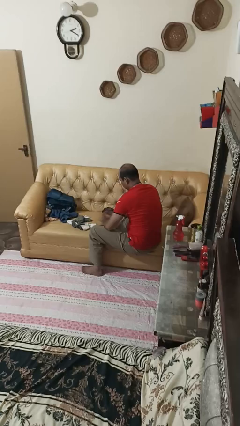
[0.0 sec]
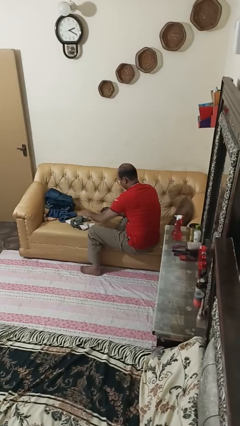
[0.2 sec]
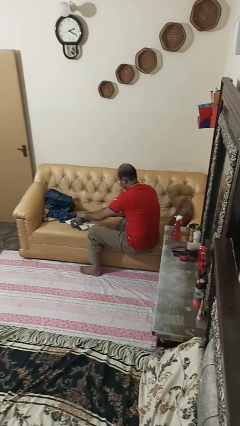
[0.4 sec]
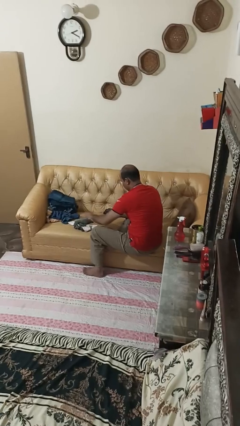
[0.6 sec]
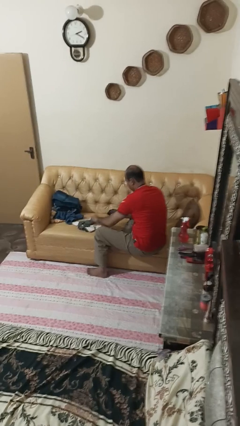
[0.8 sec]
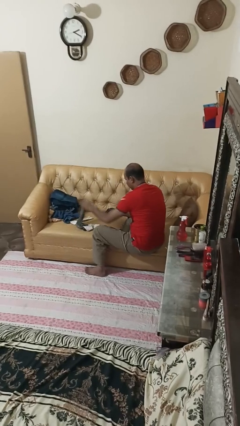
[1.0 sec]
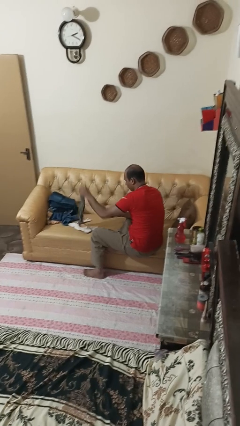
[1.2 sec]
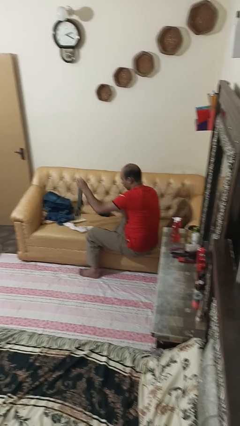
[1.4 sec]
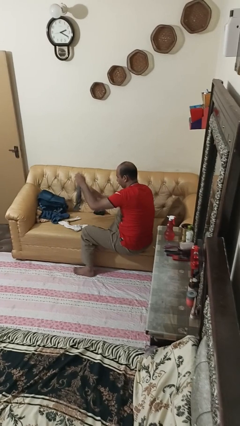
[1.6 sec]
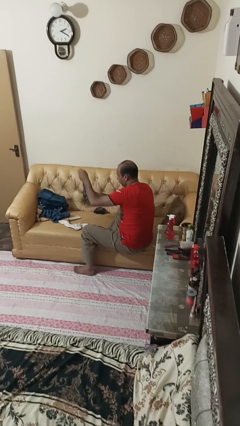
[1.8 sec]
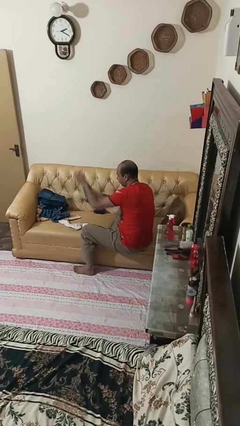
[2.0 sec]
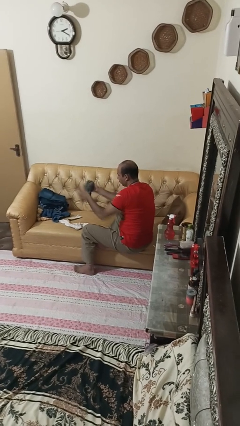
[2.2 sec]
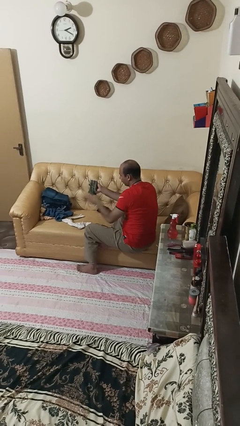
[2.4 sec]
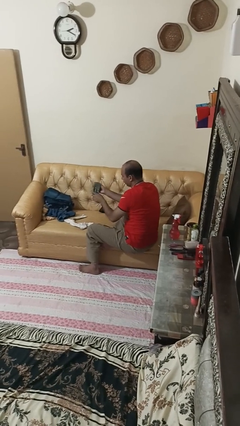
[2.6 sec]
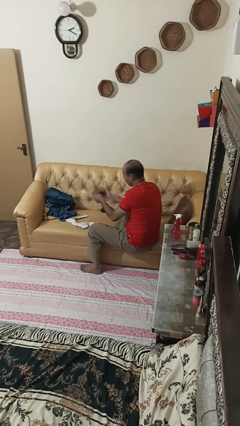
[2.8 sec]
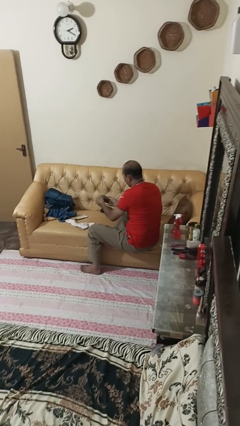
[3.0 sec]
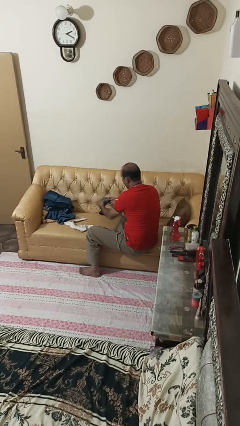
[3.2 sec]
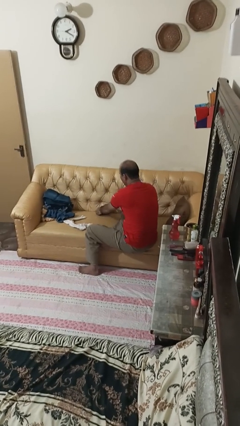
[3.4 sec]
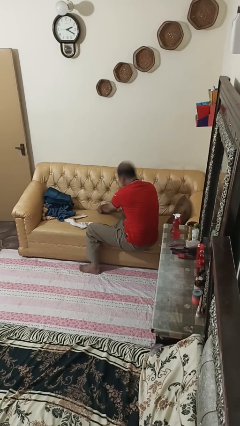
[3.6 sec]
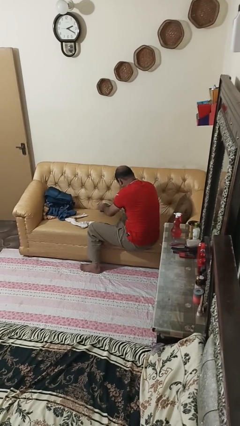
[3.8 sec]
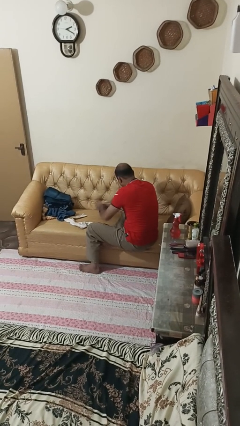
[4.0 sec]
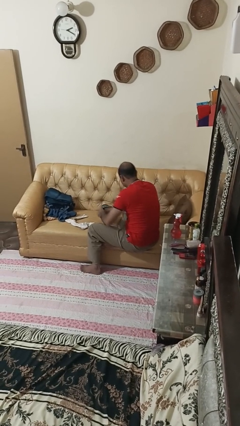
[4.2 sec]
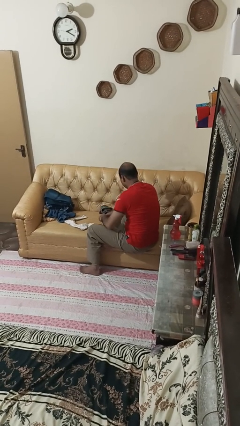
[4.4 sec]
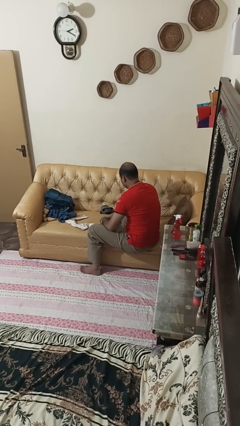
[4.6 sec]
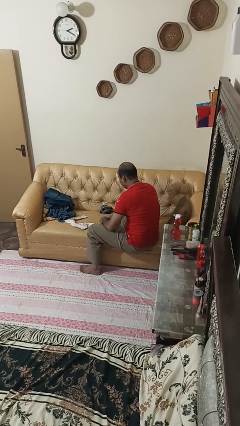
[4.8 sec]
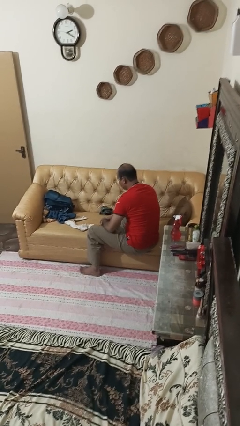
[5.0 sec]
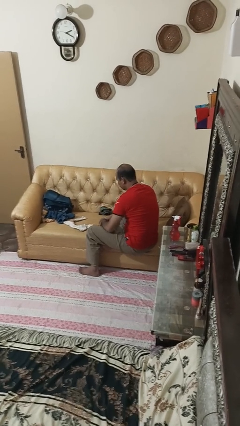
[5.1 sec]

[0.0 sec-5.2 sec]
person folds socks

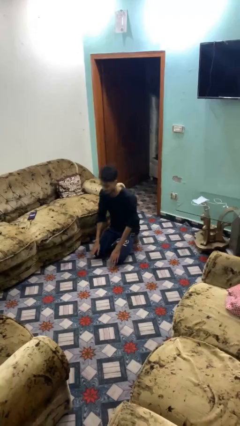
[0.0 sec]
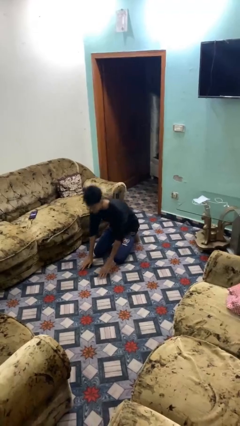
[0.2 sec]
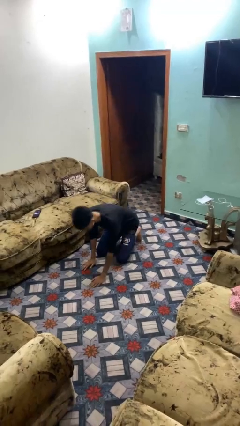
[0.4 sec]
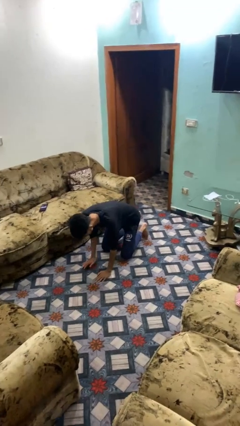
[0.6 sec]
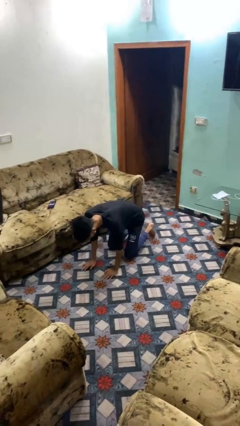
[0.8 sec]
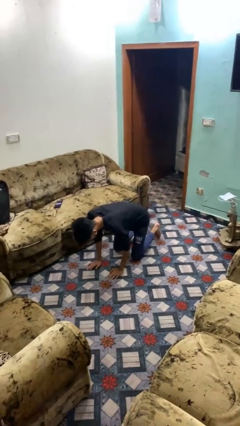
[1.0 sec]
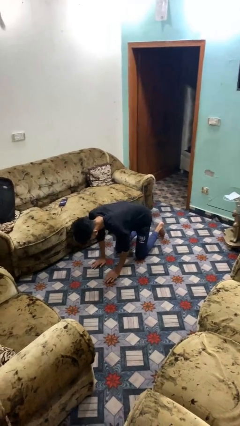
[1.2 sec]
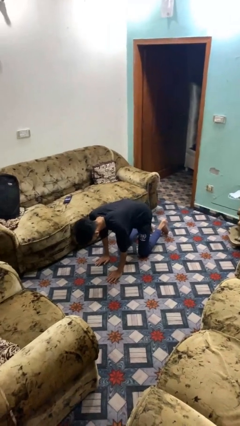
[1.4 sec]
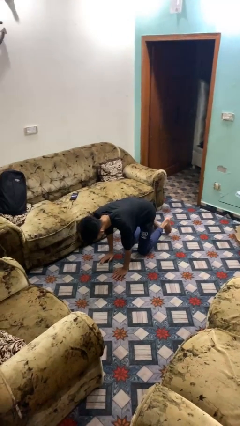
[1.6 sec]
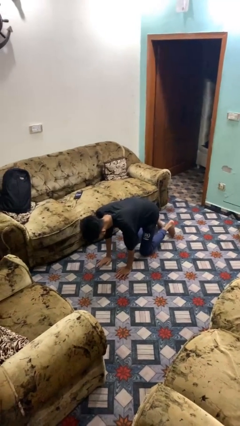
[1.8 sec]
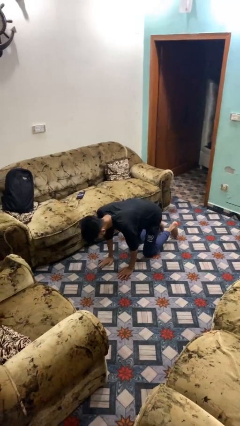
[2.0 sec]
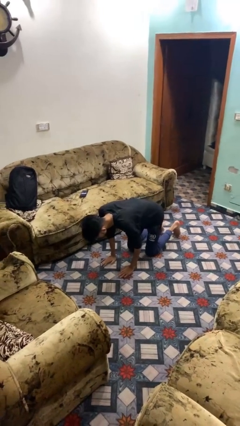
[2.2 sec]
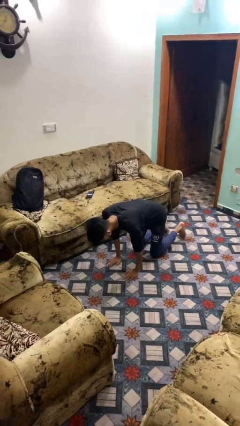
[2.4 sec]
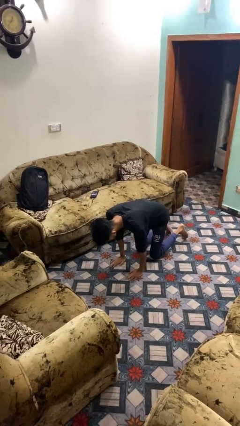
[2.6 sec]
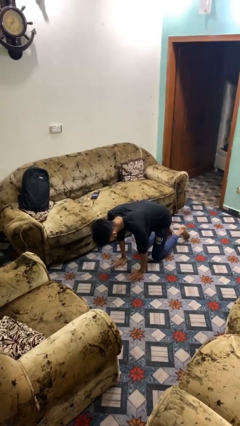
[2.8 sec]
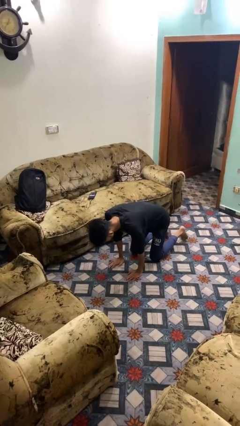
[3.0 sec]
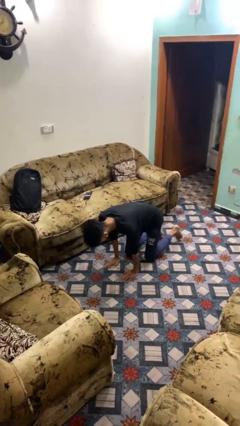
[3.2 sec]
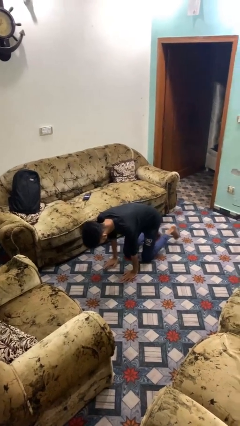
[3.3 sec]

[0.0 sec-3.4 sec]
person crawls

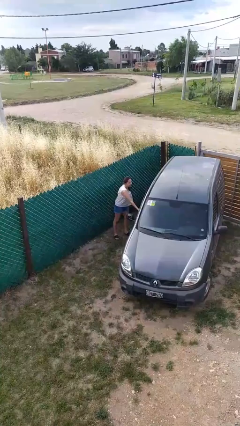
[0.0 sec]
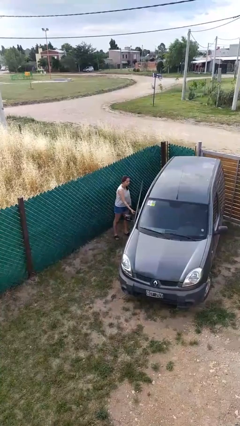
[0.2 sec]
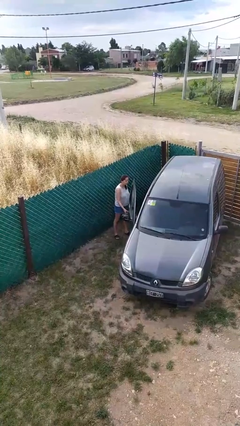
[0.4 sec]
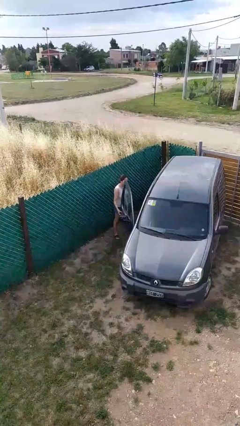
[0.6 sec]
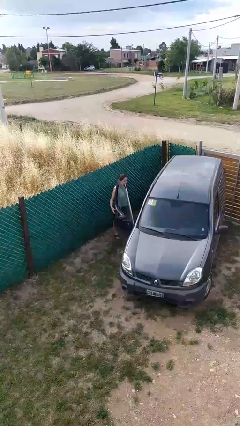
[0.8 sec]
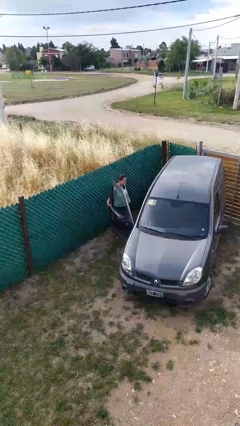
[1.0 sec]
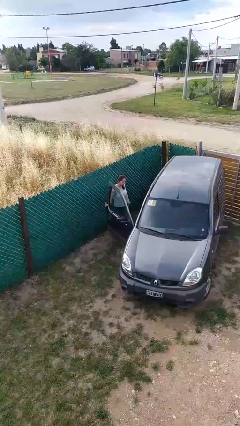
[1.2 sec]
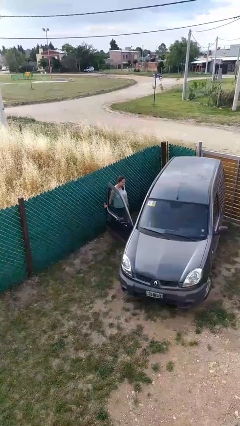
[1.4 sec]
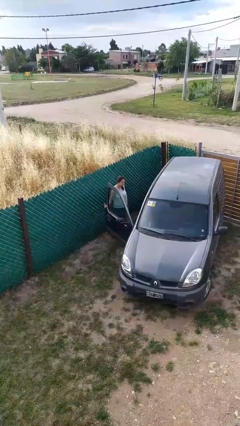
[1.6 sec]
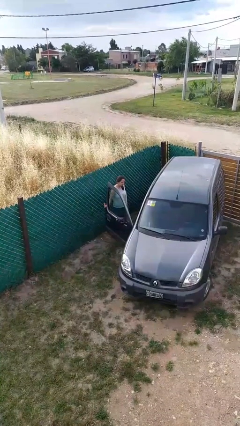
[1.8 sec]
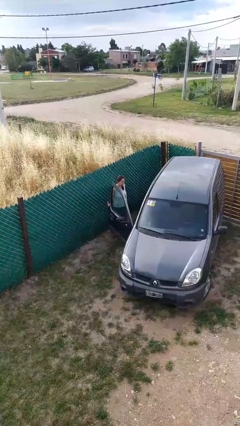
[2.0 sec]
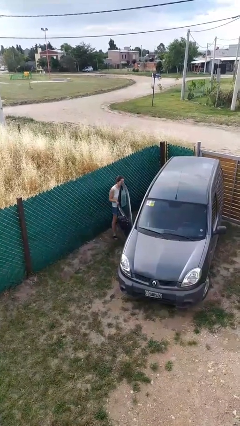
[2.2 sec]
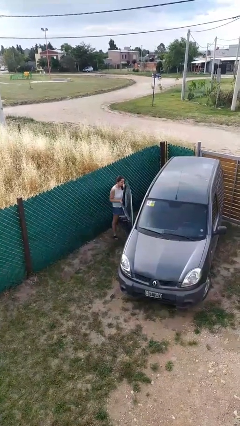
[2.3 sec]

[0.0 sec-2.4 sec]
person opens car door

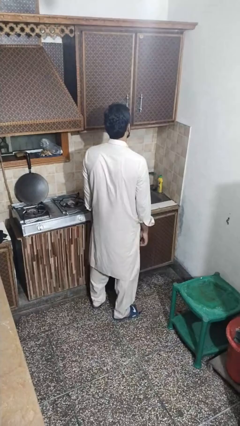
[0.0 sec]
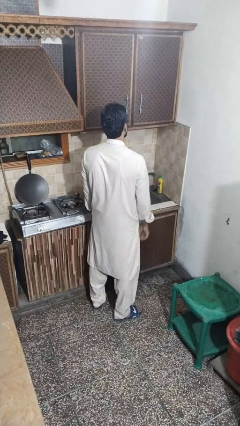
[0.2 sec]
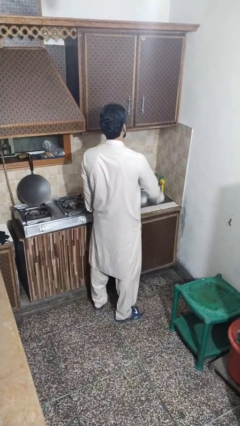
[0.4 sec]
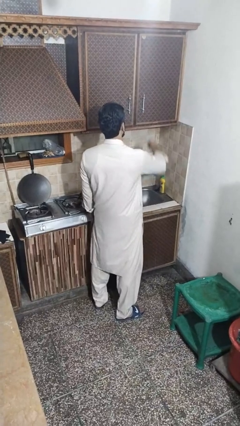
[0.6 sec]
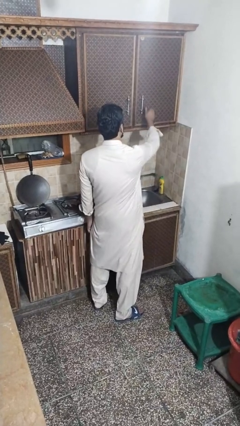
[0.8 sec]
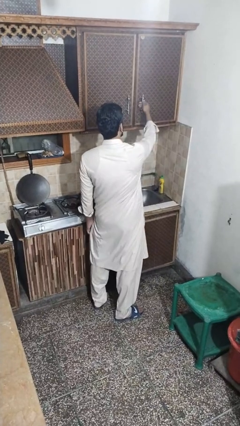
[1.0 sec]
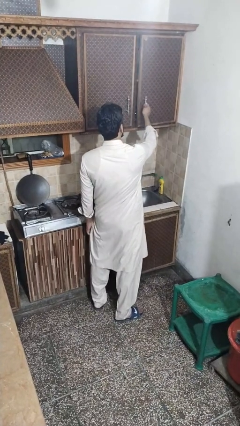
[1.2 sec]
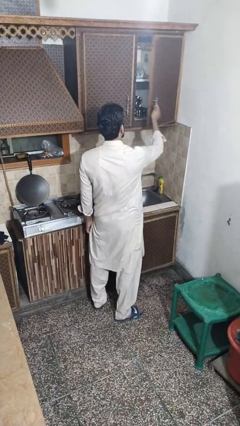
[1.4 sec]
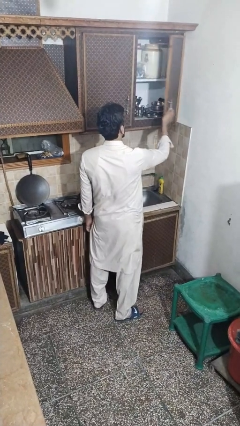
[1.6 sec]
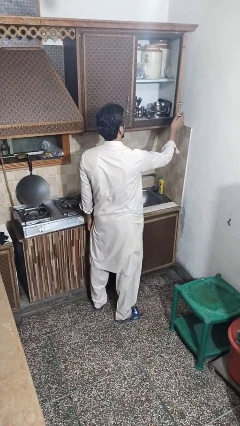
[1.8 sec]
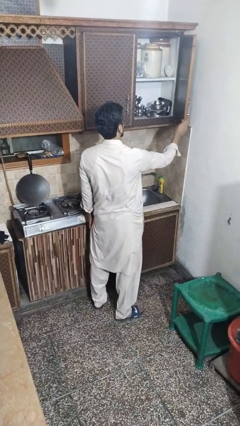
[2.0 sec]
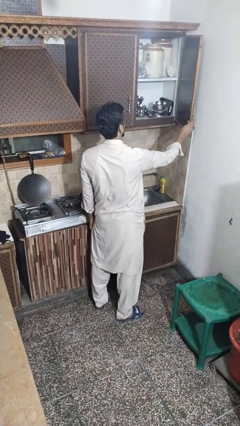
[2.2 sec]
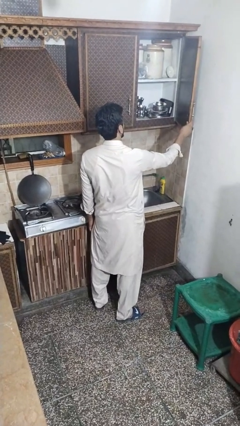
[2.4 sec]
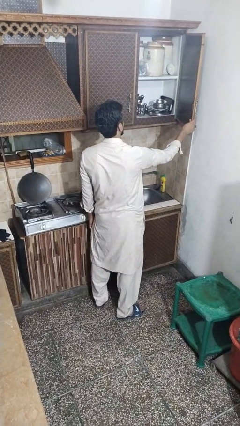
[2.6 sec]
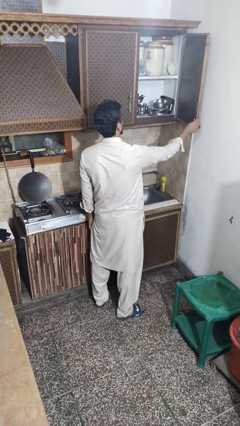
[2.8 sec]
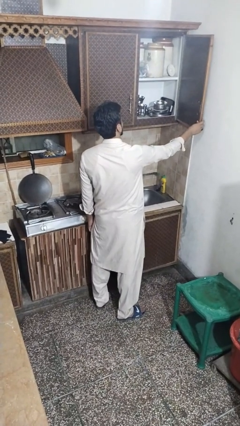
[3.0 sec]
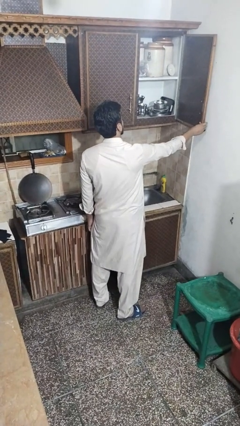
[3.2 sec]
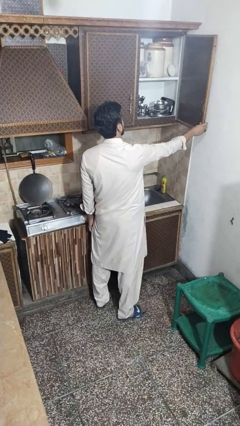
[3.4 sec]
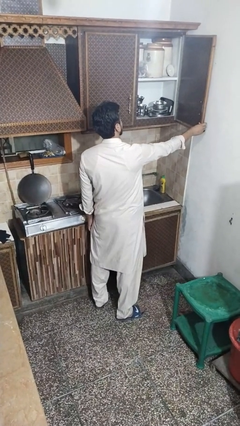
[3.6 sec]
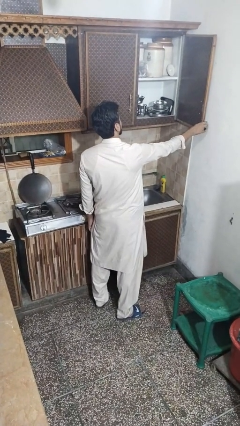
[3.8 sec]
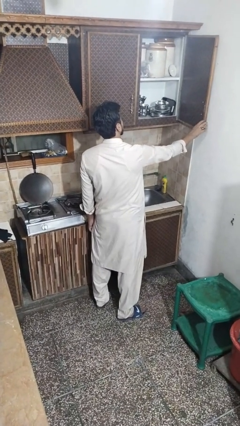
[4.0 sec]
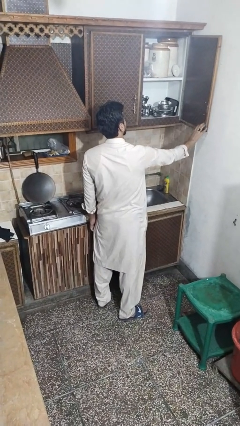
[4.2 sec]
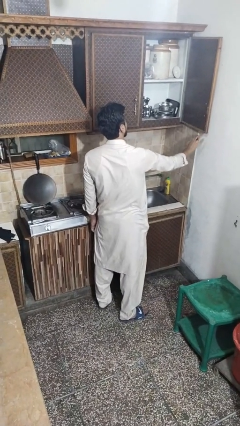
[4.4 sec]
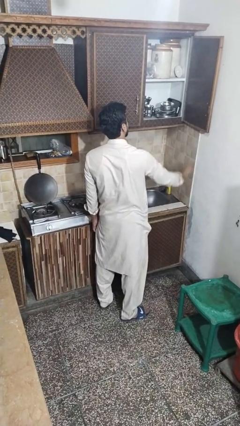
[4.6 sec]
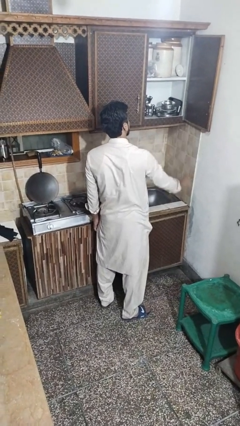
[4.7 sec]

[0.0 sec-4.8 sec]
person opens cabinet

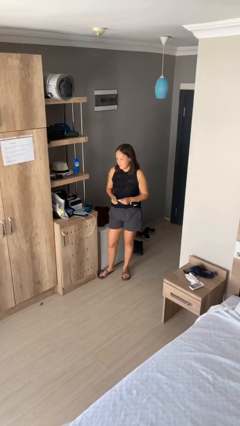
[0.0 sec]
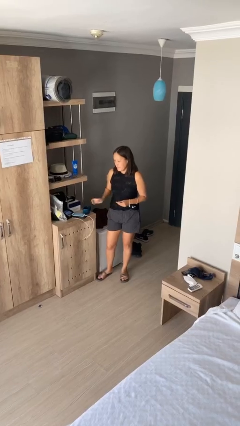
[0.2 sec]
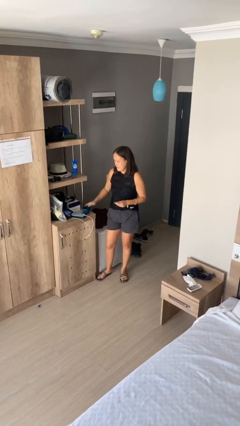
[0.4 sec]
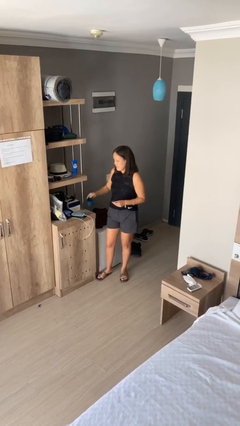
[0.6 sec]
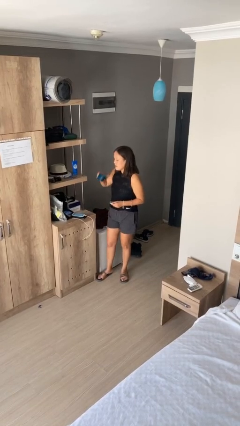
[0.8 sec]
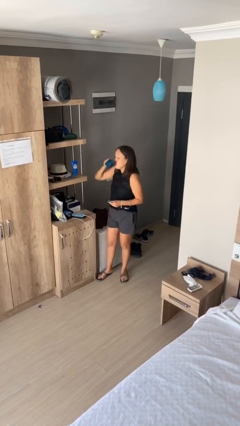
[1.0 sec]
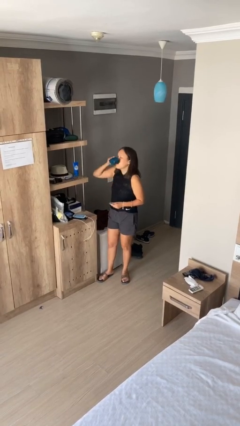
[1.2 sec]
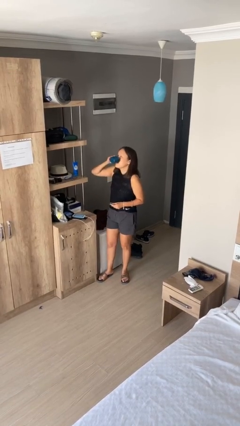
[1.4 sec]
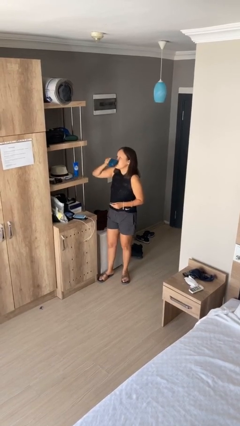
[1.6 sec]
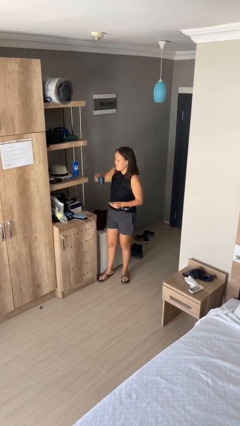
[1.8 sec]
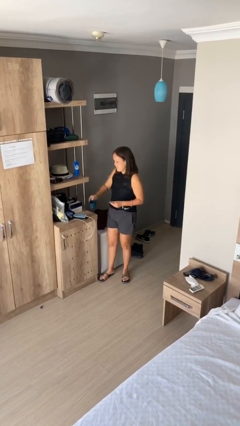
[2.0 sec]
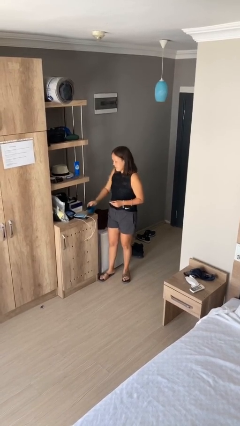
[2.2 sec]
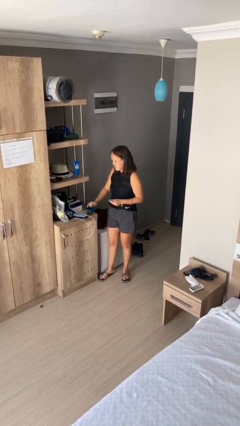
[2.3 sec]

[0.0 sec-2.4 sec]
person drinks from cup
